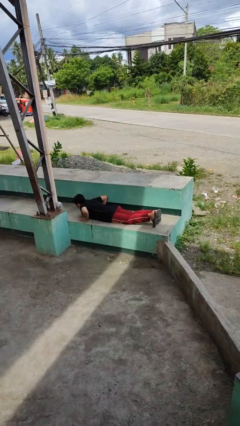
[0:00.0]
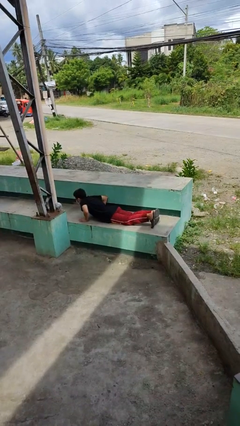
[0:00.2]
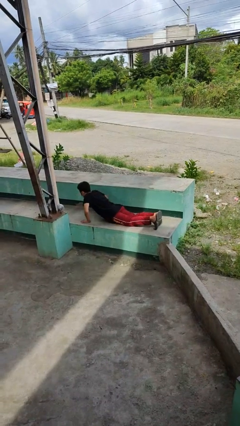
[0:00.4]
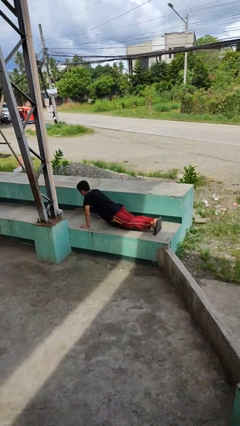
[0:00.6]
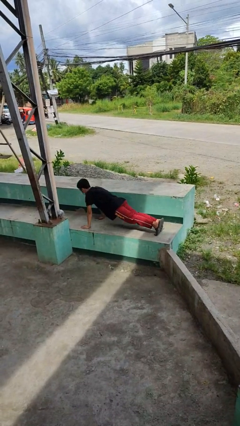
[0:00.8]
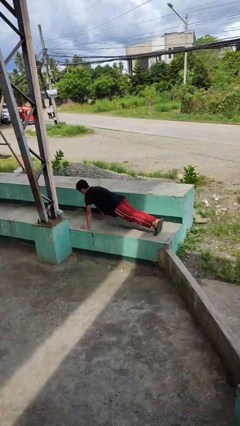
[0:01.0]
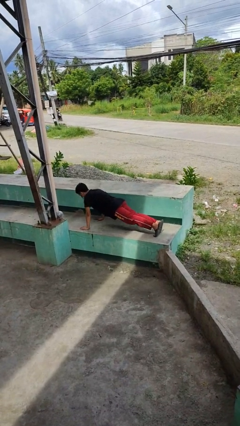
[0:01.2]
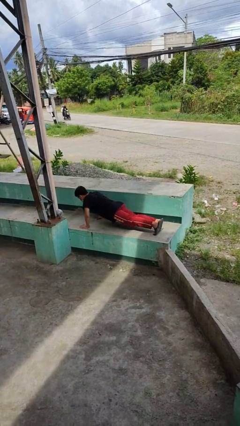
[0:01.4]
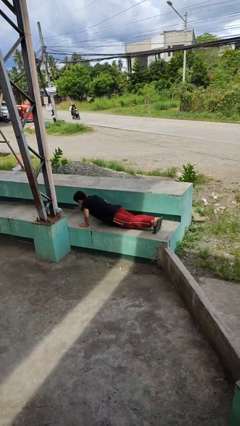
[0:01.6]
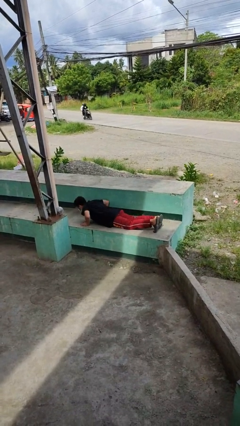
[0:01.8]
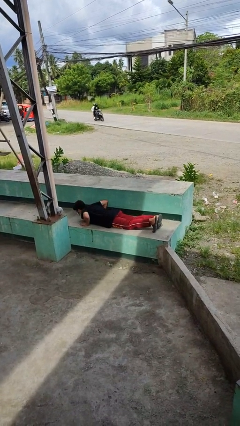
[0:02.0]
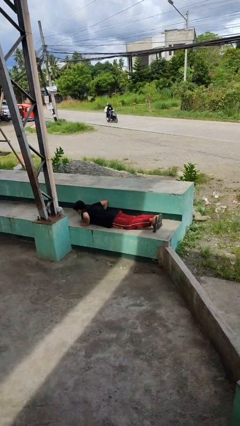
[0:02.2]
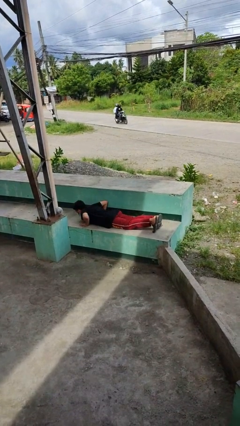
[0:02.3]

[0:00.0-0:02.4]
person exercises with pushup

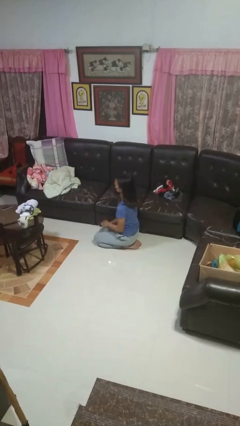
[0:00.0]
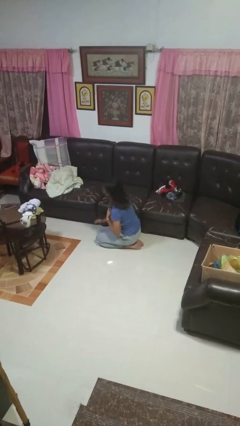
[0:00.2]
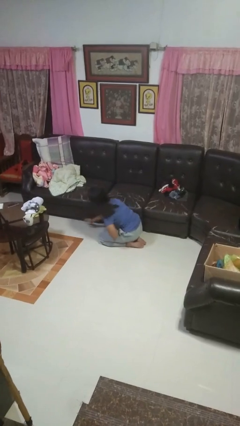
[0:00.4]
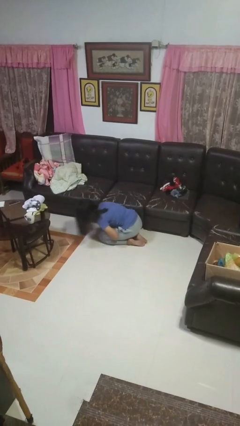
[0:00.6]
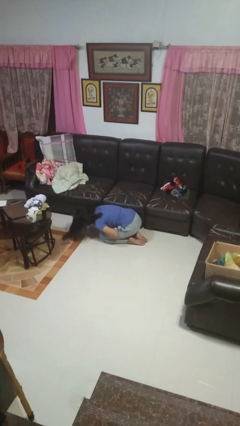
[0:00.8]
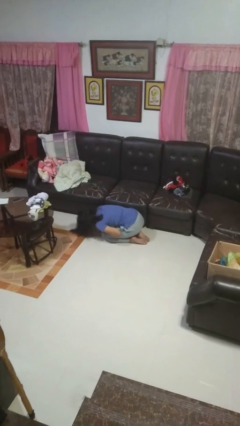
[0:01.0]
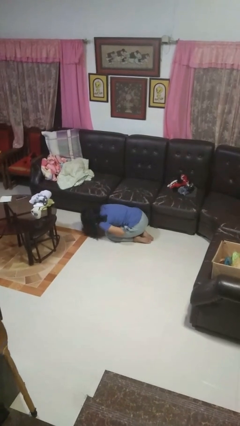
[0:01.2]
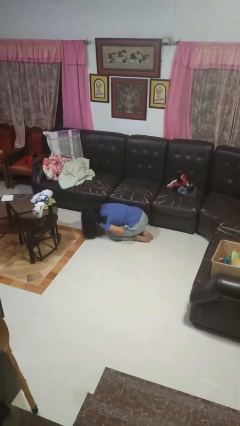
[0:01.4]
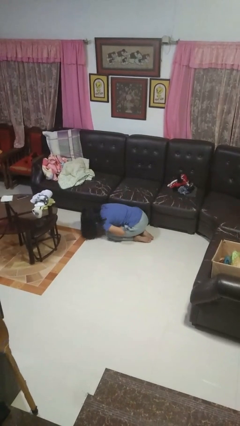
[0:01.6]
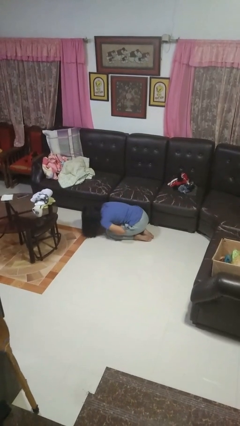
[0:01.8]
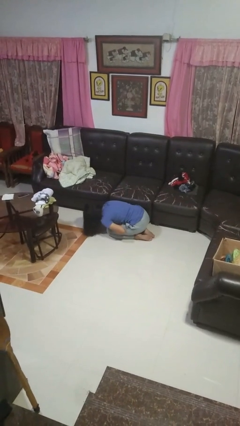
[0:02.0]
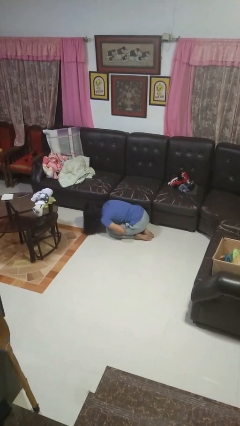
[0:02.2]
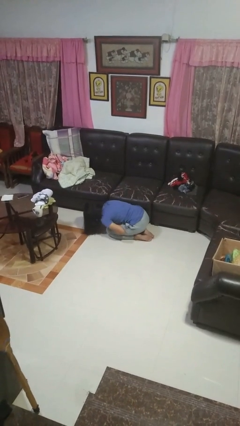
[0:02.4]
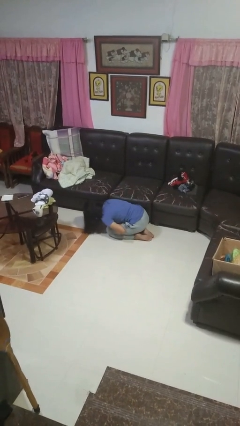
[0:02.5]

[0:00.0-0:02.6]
person searches under couch

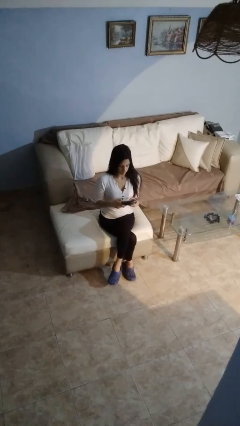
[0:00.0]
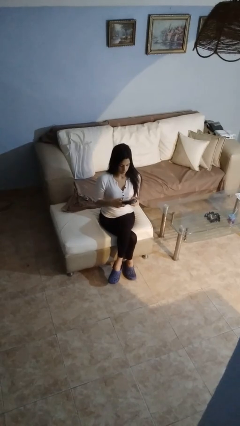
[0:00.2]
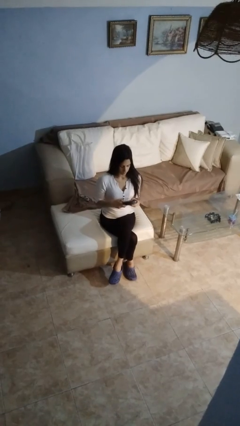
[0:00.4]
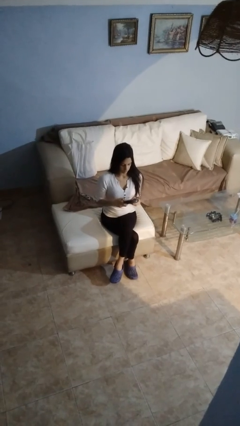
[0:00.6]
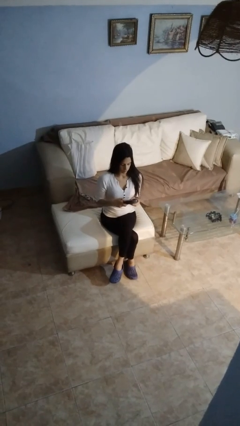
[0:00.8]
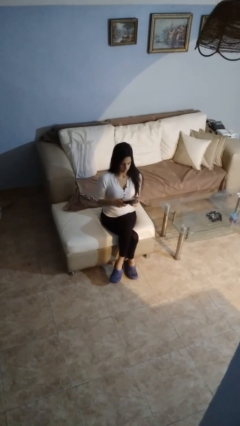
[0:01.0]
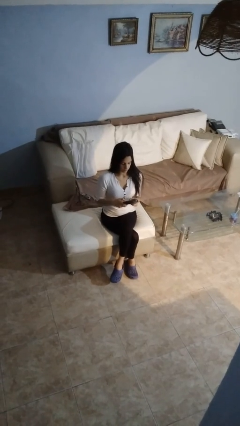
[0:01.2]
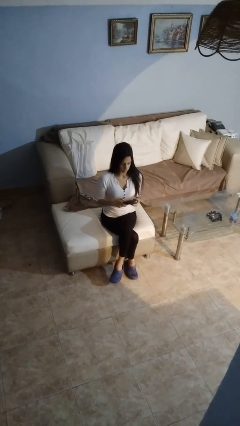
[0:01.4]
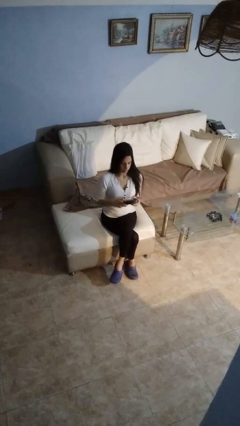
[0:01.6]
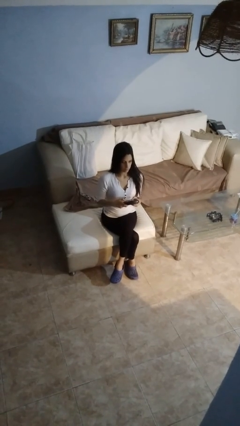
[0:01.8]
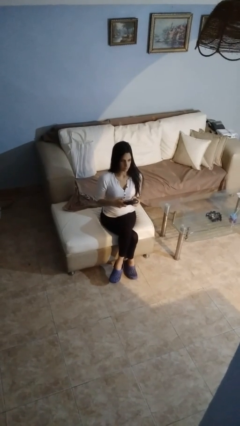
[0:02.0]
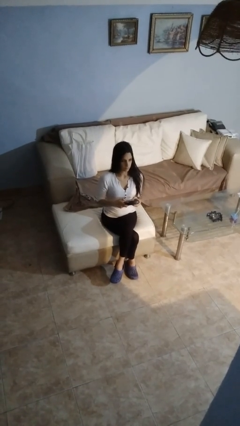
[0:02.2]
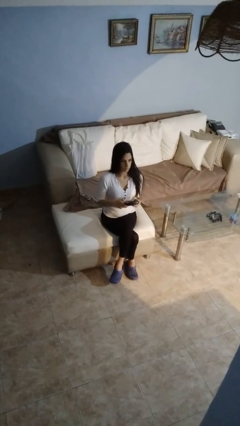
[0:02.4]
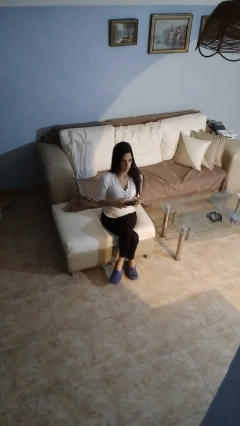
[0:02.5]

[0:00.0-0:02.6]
person interacts with handheld game

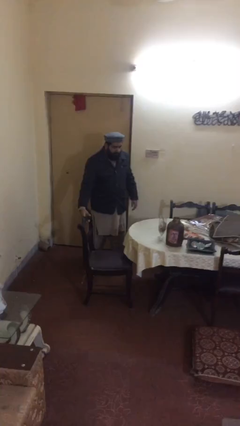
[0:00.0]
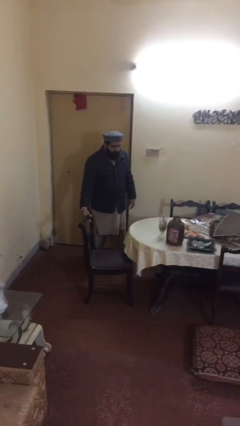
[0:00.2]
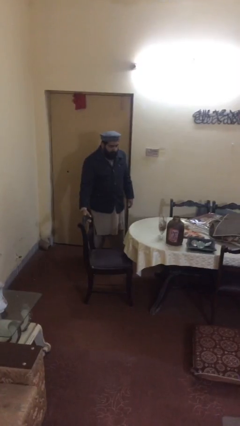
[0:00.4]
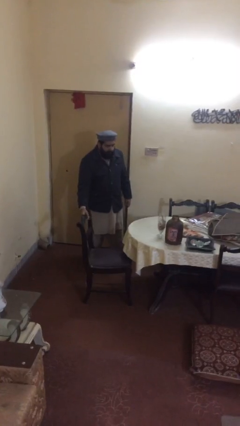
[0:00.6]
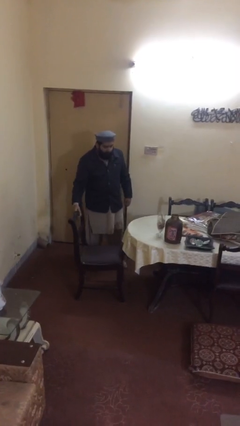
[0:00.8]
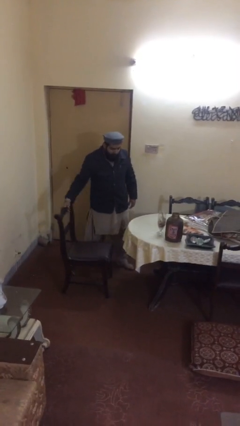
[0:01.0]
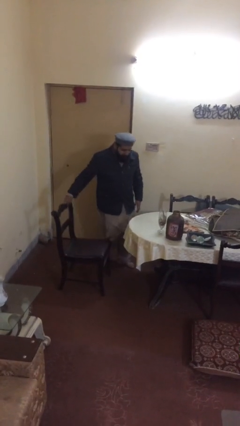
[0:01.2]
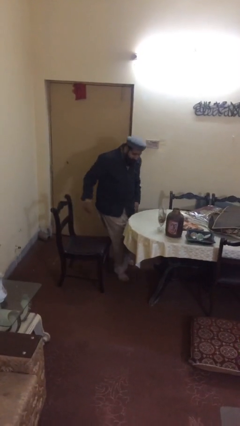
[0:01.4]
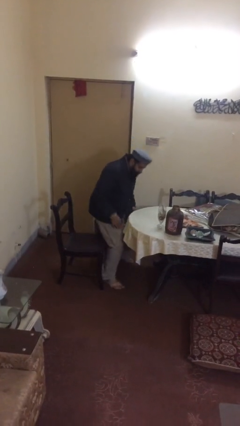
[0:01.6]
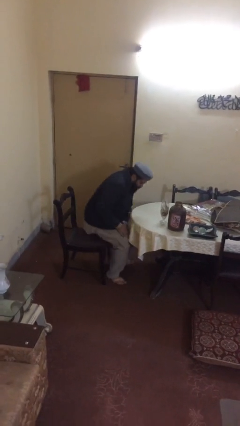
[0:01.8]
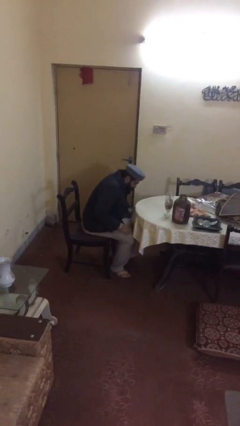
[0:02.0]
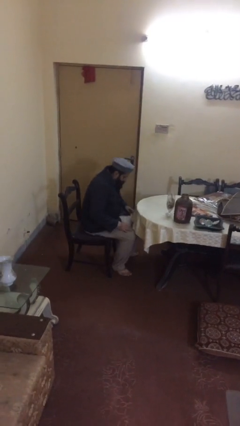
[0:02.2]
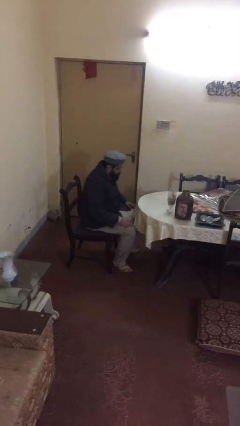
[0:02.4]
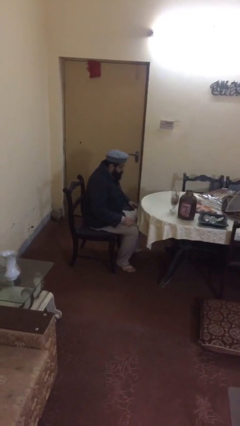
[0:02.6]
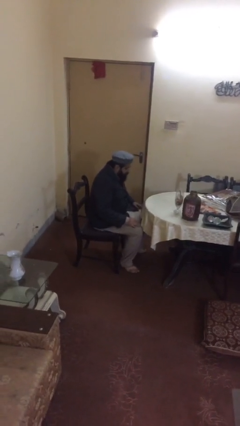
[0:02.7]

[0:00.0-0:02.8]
person sits down

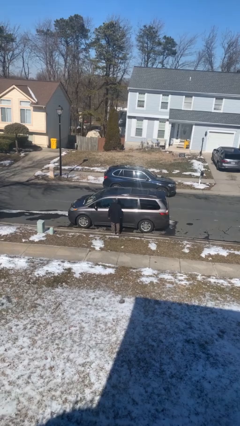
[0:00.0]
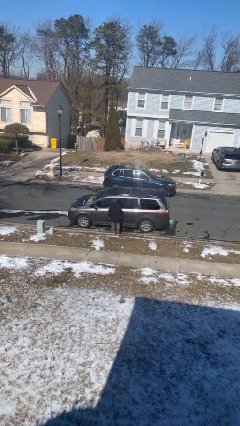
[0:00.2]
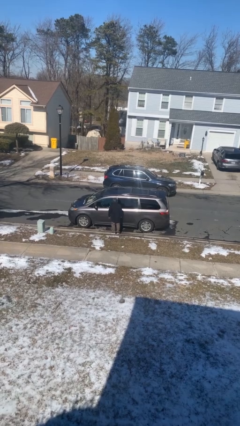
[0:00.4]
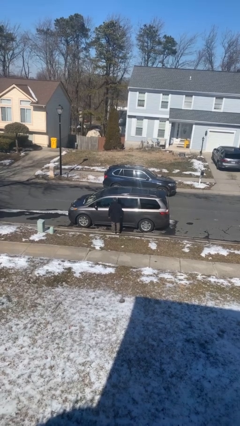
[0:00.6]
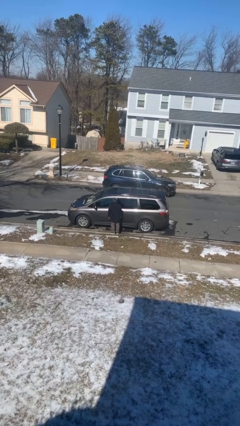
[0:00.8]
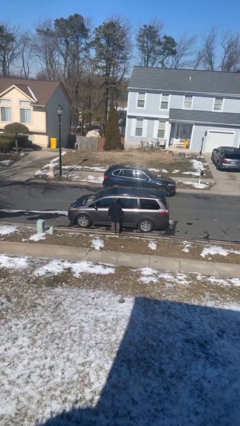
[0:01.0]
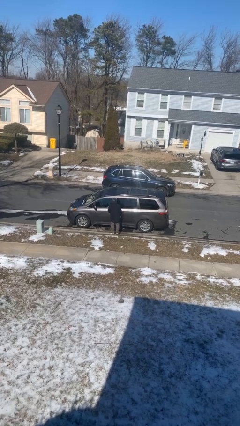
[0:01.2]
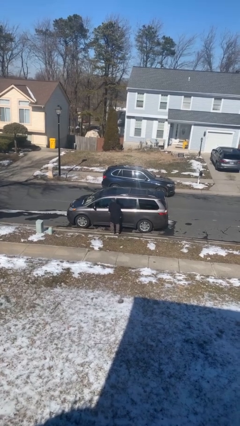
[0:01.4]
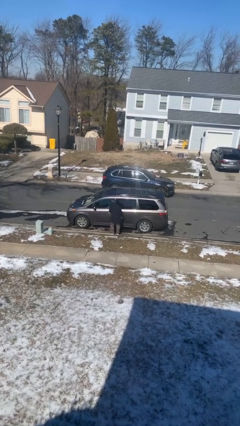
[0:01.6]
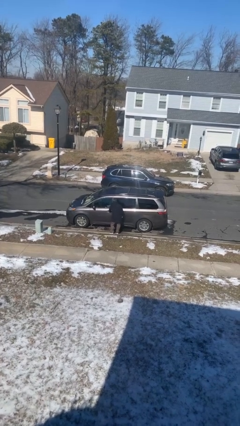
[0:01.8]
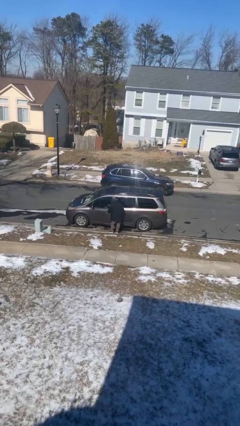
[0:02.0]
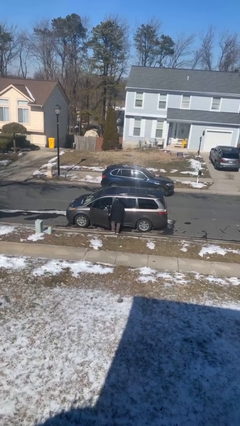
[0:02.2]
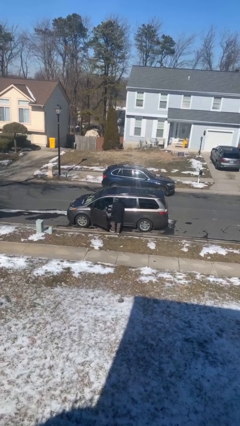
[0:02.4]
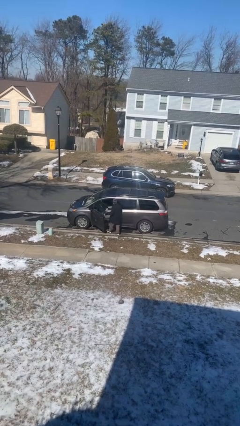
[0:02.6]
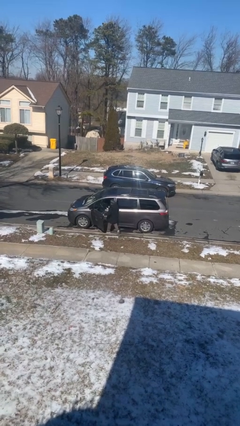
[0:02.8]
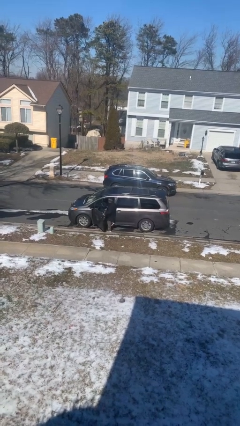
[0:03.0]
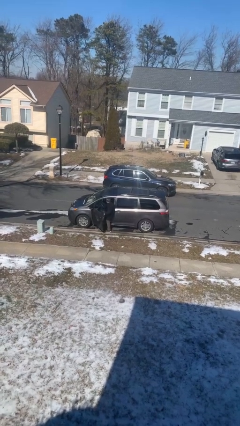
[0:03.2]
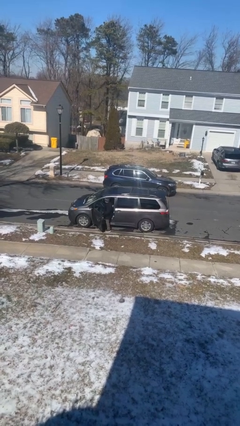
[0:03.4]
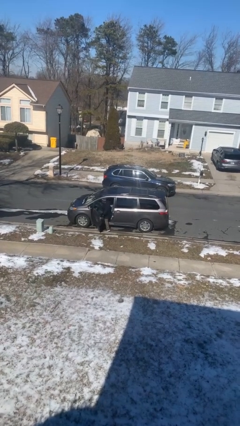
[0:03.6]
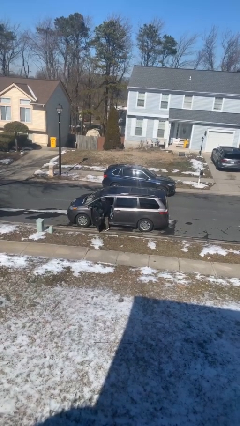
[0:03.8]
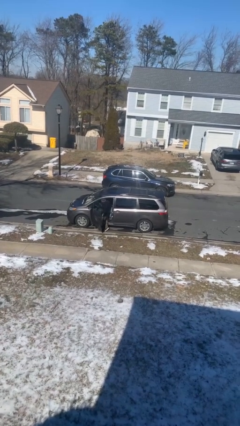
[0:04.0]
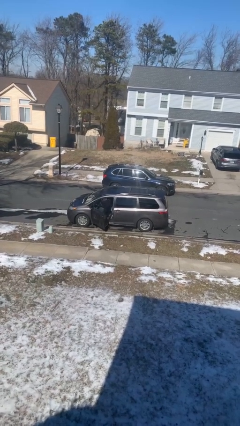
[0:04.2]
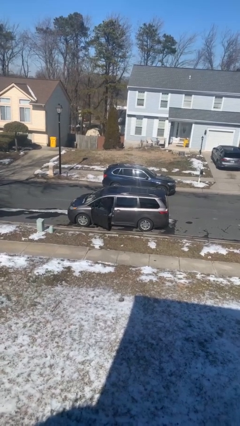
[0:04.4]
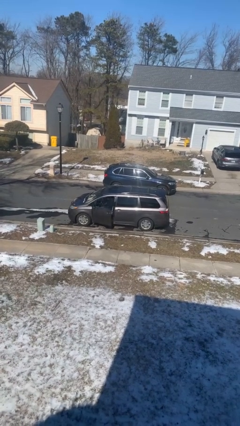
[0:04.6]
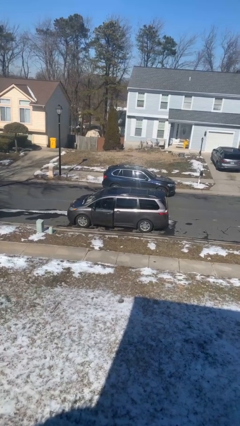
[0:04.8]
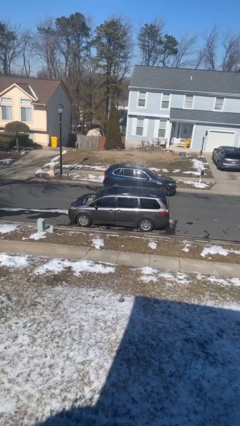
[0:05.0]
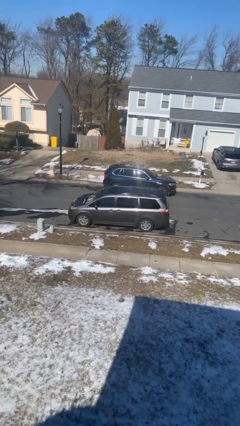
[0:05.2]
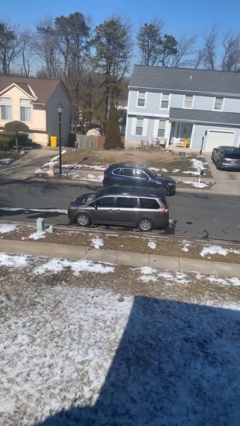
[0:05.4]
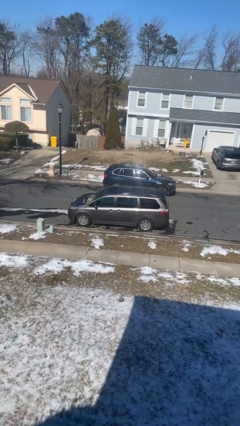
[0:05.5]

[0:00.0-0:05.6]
car picks up person

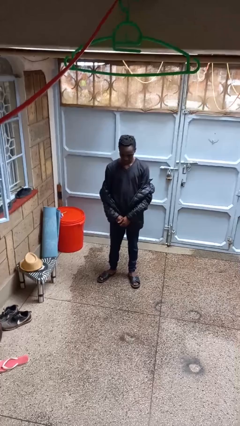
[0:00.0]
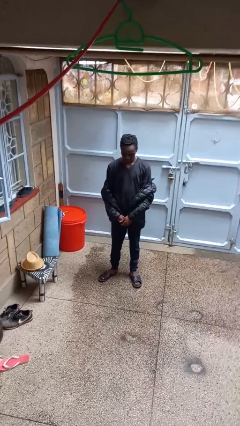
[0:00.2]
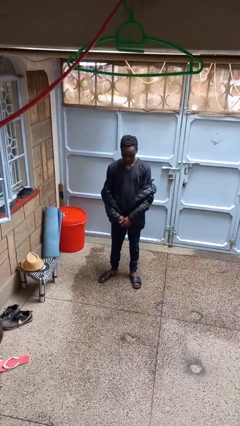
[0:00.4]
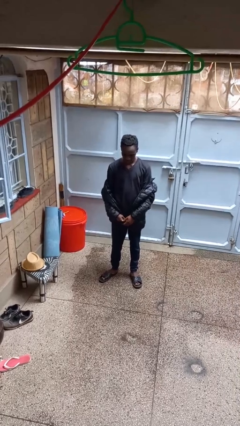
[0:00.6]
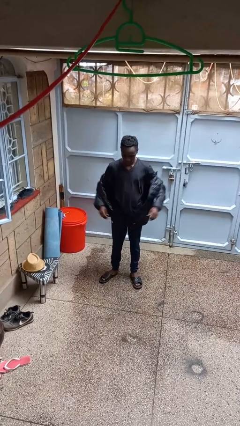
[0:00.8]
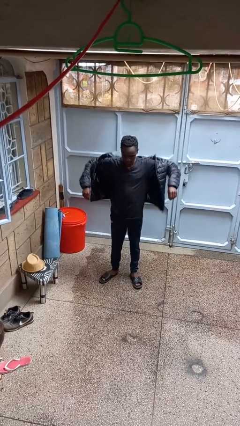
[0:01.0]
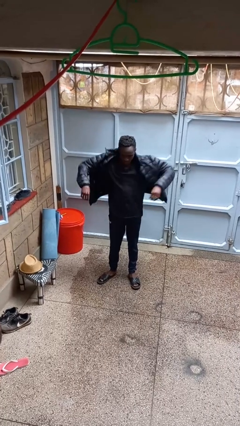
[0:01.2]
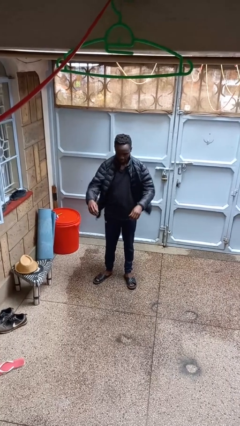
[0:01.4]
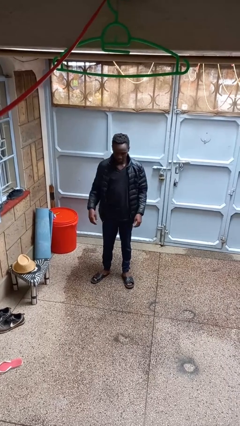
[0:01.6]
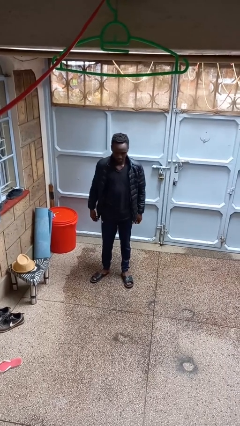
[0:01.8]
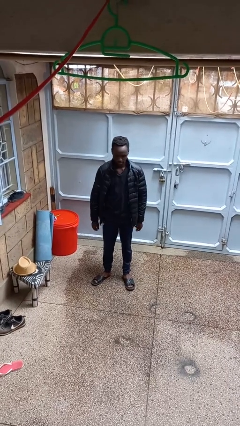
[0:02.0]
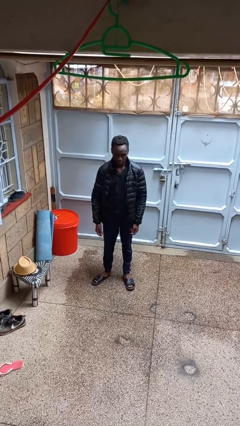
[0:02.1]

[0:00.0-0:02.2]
person puts on jacket
